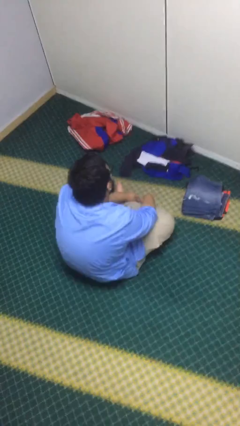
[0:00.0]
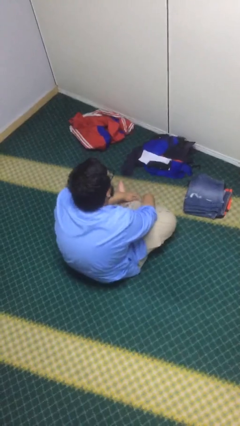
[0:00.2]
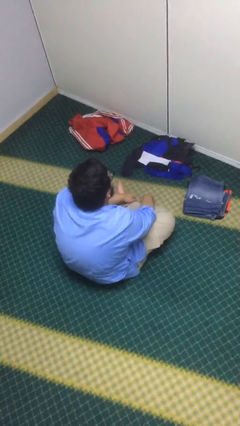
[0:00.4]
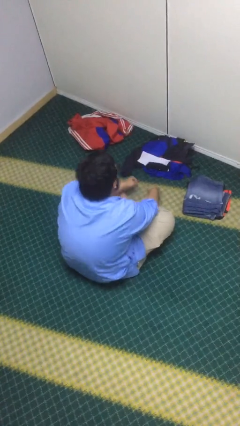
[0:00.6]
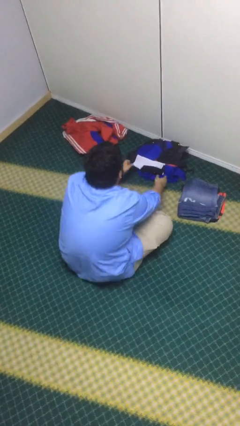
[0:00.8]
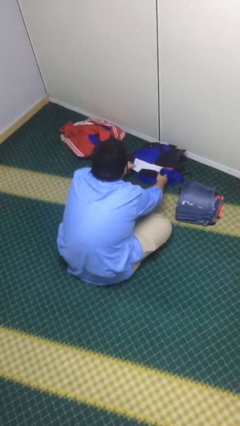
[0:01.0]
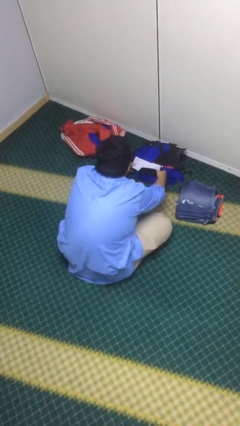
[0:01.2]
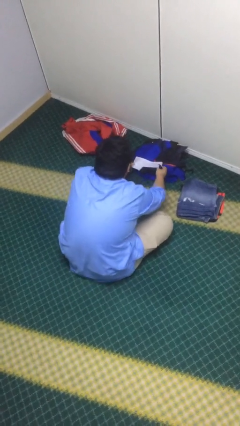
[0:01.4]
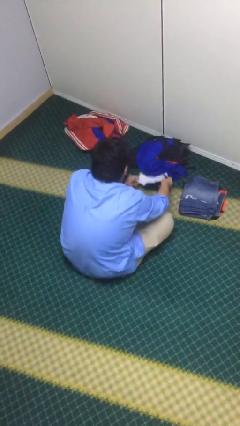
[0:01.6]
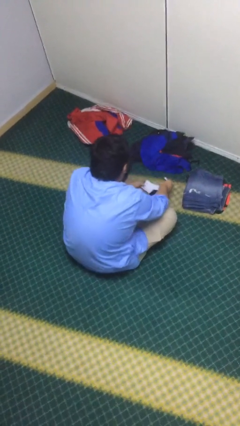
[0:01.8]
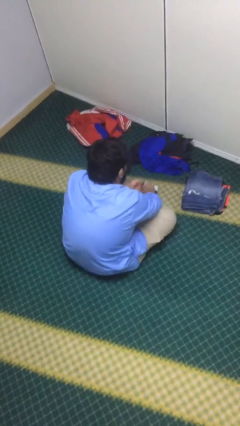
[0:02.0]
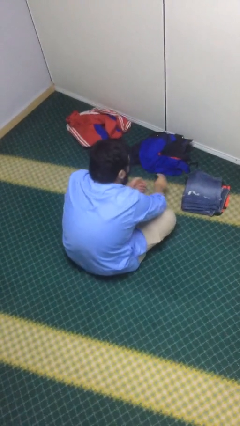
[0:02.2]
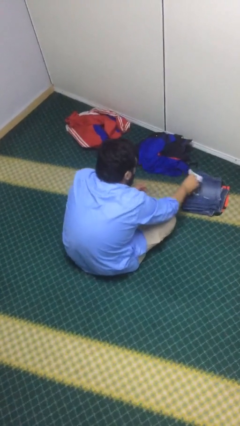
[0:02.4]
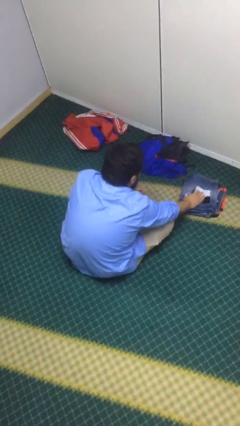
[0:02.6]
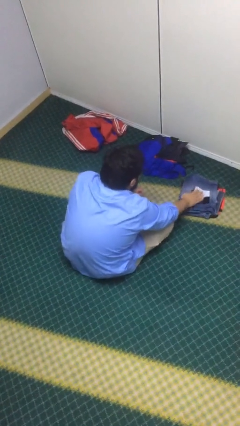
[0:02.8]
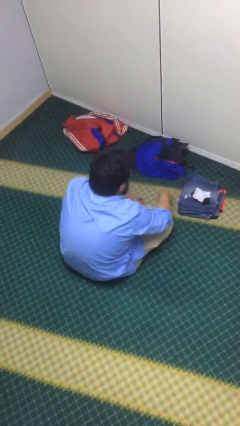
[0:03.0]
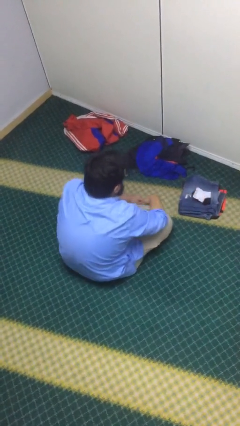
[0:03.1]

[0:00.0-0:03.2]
person folds socks

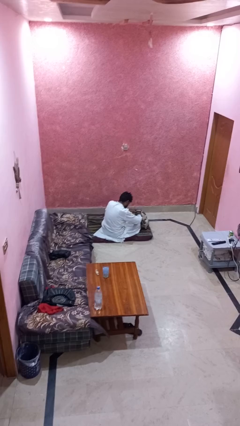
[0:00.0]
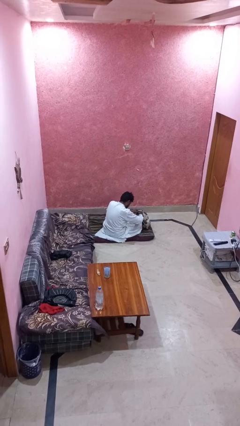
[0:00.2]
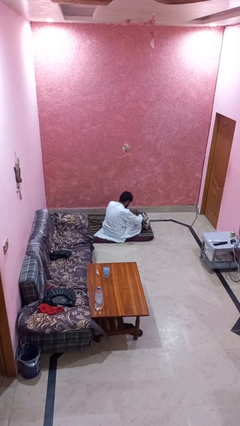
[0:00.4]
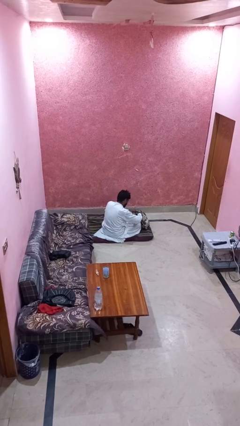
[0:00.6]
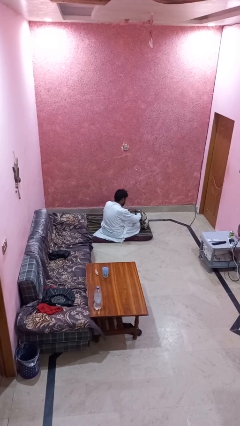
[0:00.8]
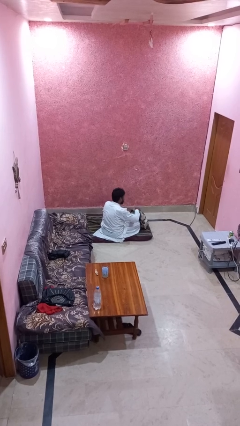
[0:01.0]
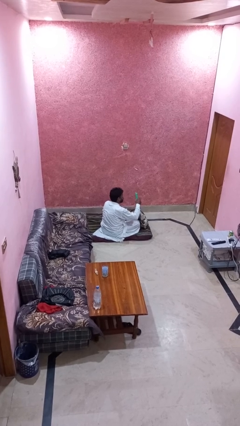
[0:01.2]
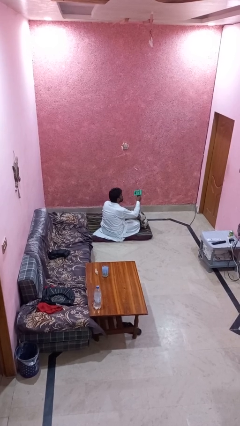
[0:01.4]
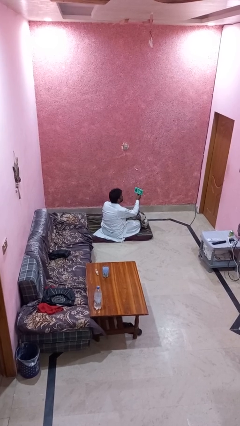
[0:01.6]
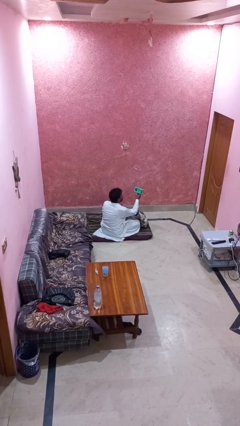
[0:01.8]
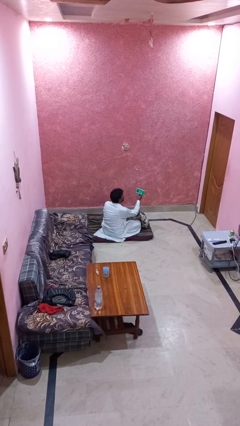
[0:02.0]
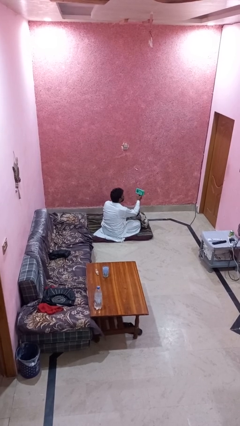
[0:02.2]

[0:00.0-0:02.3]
person takes object from backpack

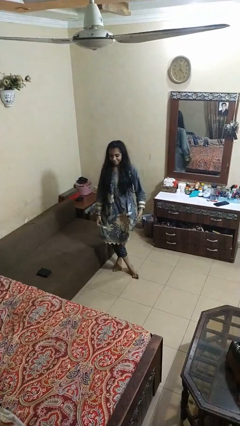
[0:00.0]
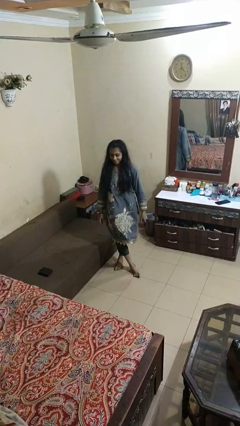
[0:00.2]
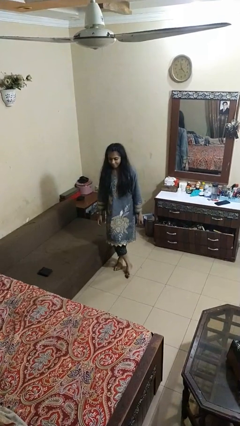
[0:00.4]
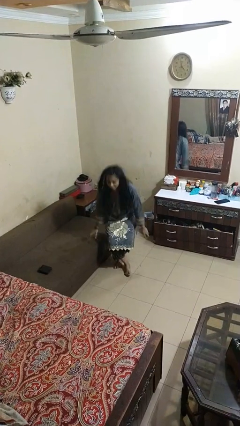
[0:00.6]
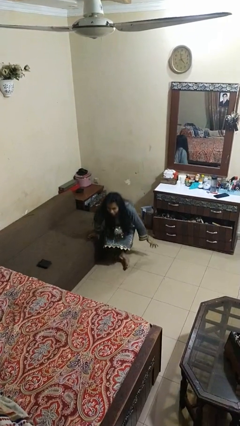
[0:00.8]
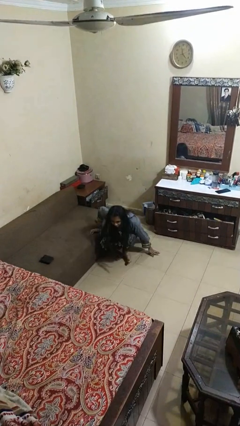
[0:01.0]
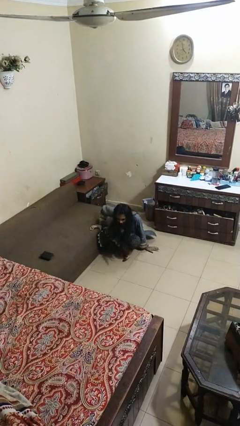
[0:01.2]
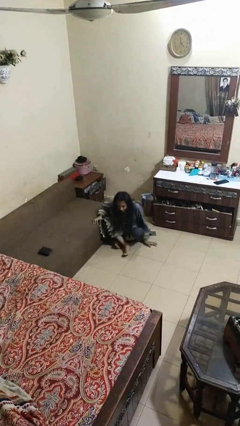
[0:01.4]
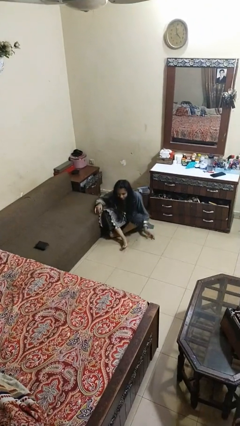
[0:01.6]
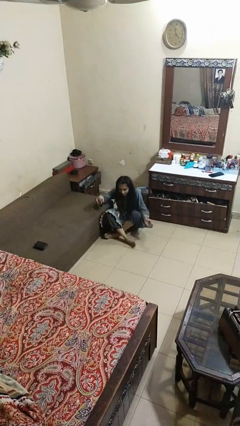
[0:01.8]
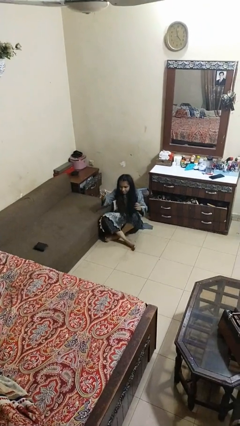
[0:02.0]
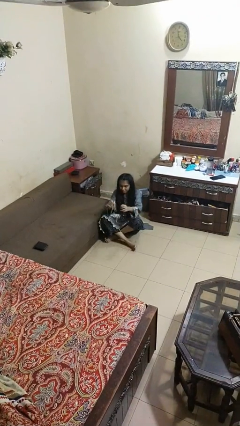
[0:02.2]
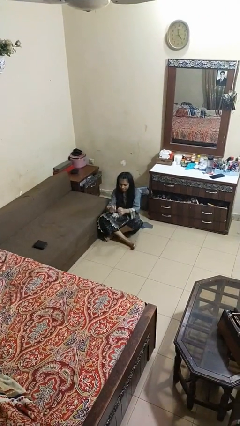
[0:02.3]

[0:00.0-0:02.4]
person sits crisscross

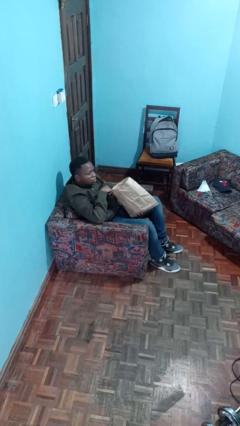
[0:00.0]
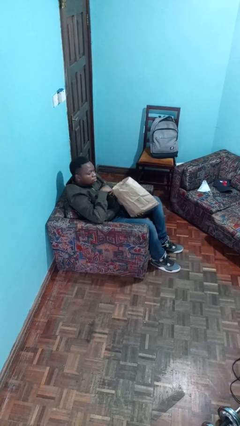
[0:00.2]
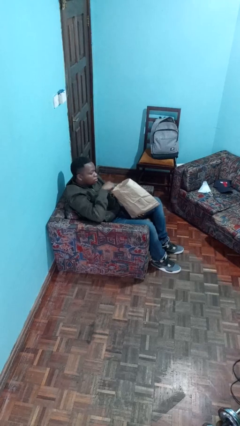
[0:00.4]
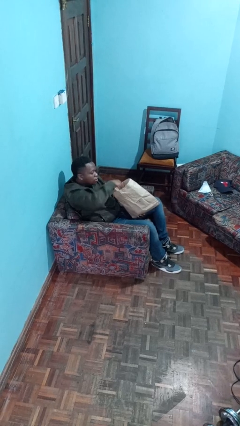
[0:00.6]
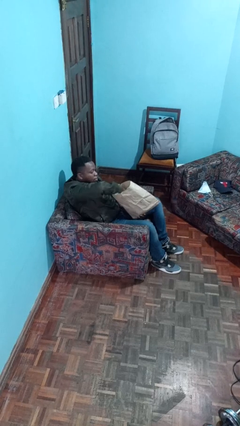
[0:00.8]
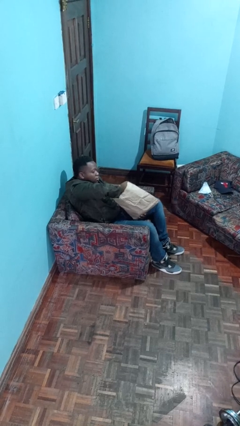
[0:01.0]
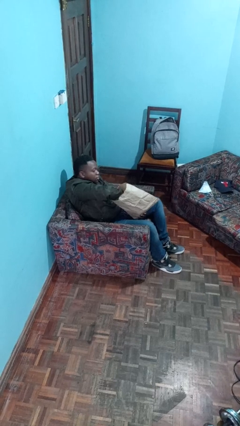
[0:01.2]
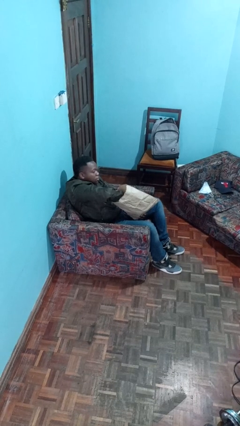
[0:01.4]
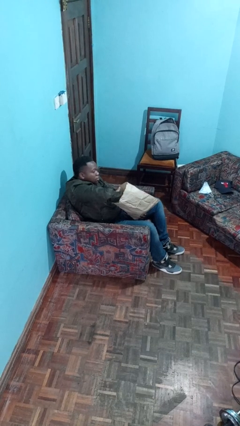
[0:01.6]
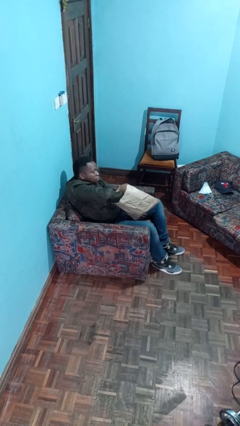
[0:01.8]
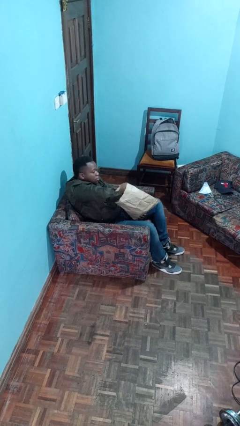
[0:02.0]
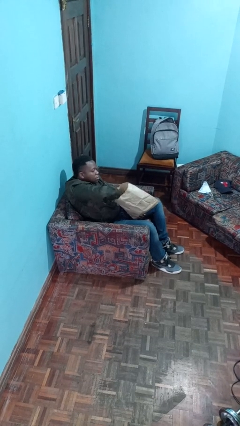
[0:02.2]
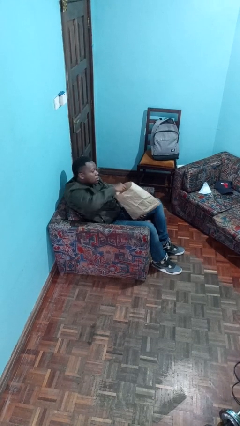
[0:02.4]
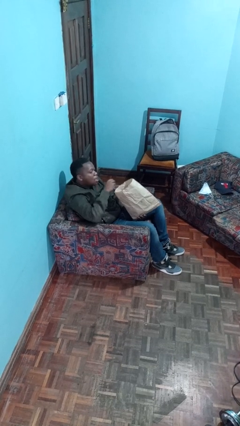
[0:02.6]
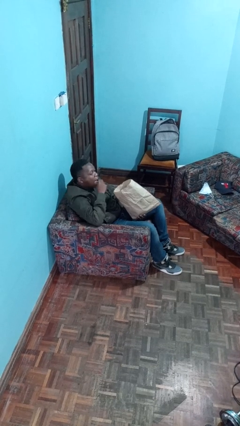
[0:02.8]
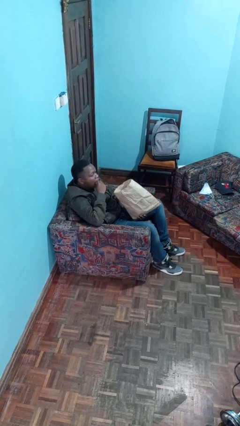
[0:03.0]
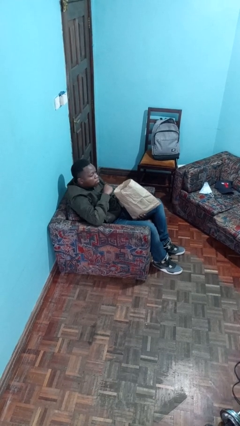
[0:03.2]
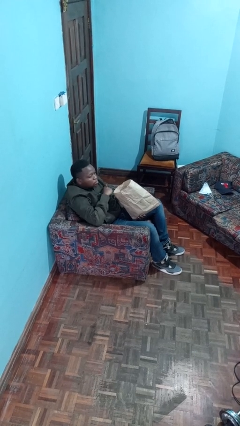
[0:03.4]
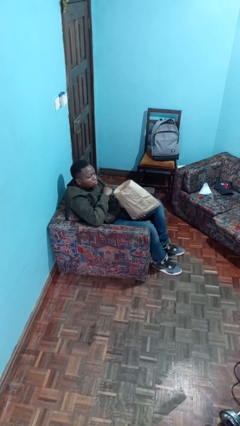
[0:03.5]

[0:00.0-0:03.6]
person eats snack from bag

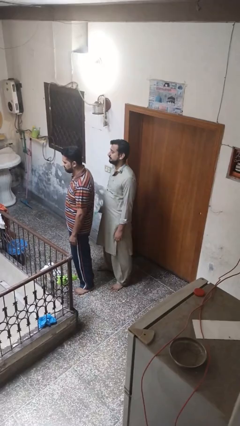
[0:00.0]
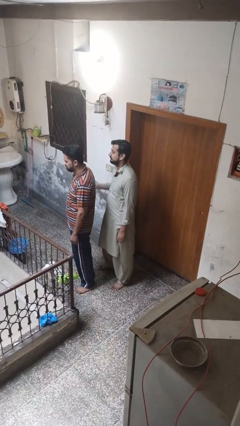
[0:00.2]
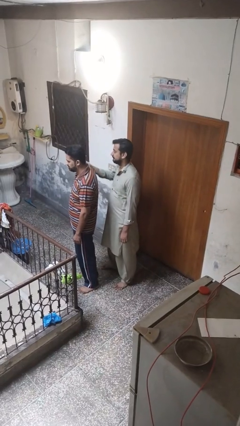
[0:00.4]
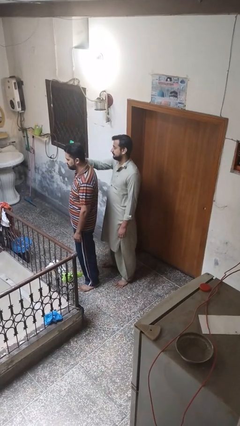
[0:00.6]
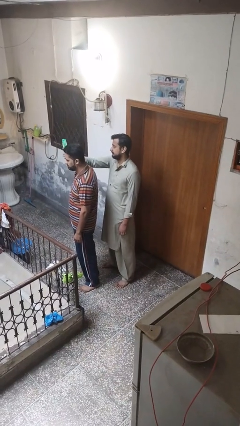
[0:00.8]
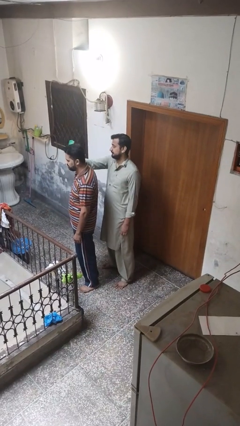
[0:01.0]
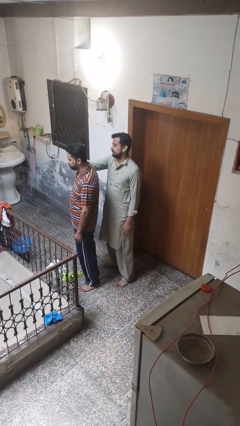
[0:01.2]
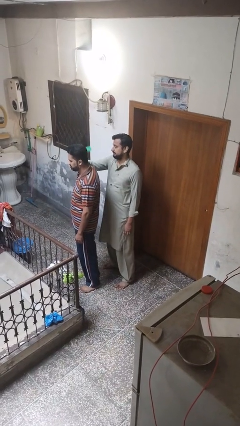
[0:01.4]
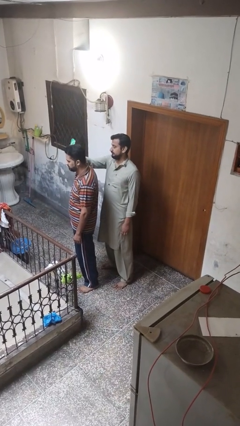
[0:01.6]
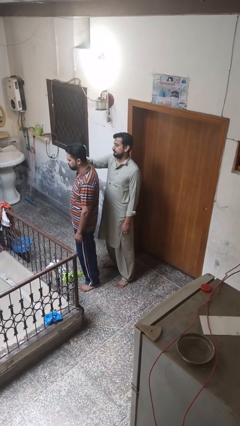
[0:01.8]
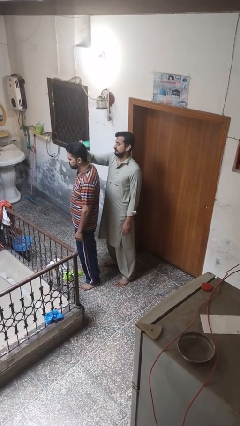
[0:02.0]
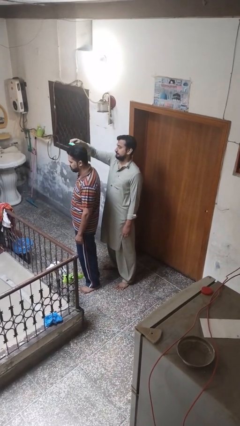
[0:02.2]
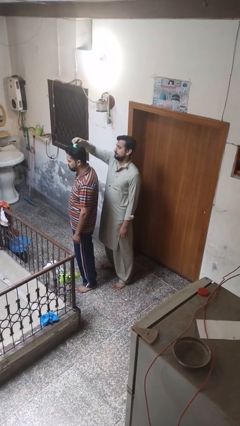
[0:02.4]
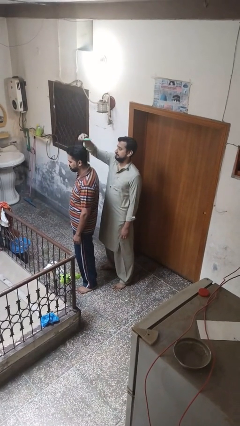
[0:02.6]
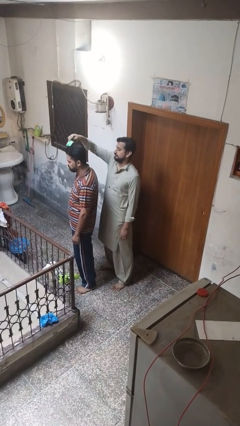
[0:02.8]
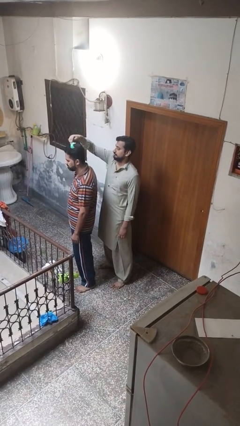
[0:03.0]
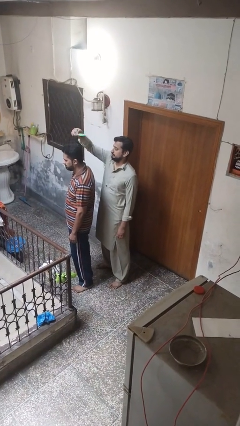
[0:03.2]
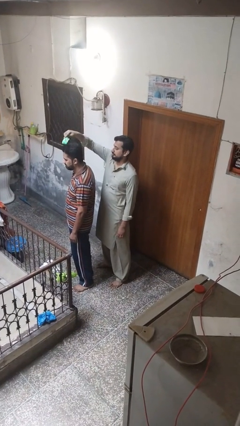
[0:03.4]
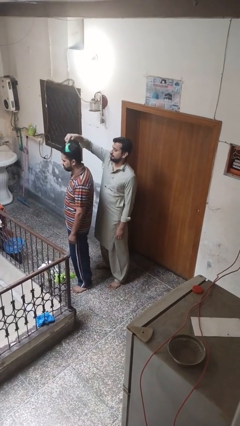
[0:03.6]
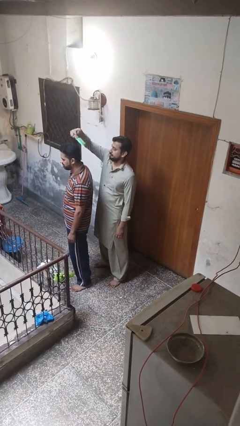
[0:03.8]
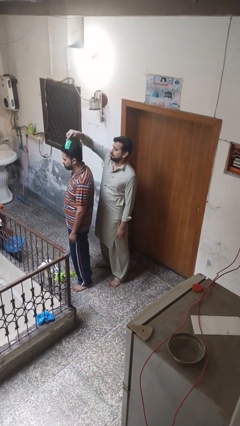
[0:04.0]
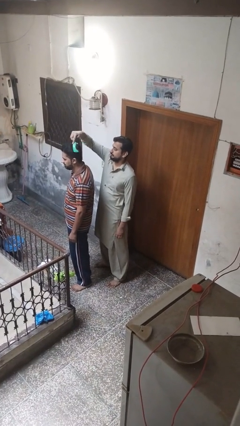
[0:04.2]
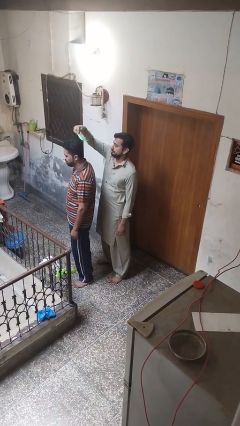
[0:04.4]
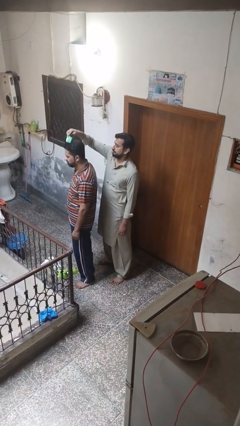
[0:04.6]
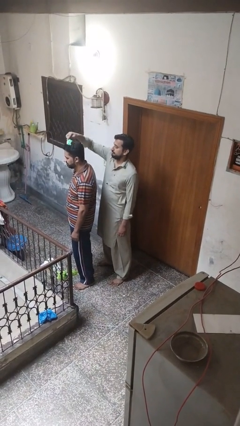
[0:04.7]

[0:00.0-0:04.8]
person brushes hair of person

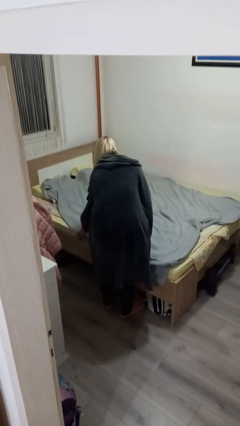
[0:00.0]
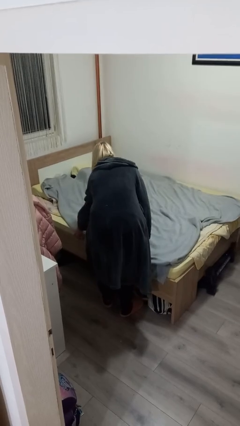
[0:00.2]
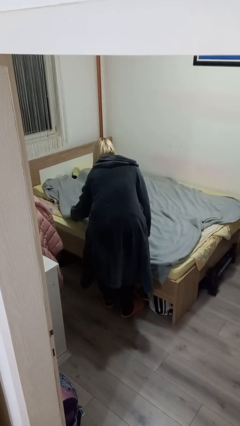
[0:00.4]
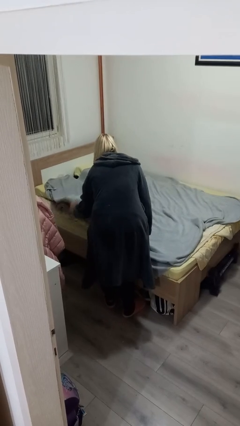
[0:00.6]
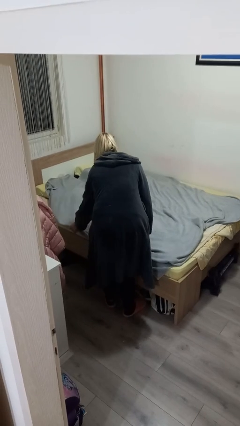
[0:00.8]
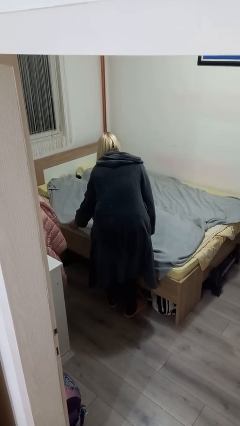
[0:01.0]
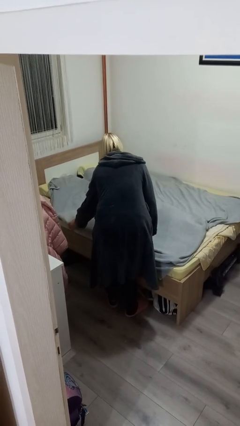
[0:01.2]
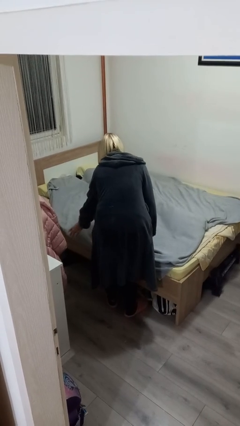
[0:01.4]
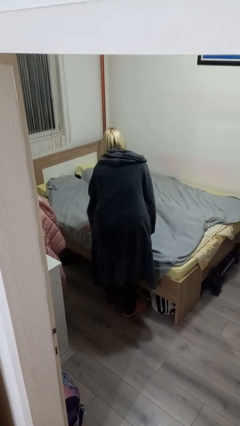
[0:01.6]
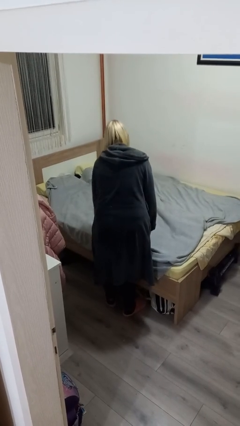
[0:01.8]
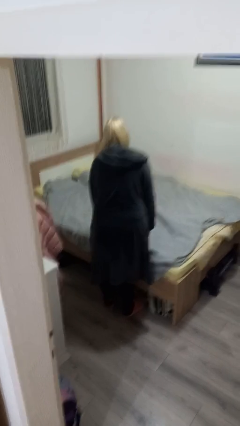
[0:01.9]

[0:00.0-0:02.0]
person makes bed
